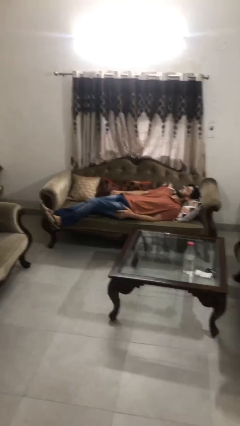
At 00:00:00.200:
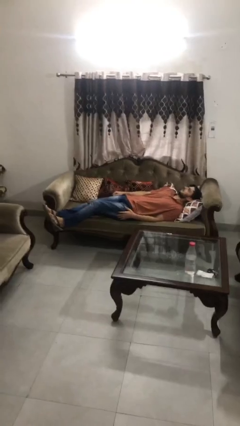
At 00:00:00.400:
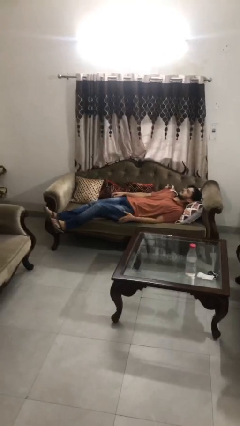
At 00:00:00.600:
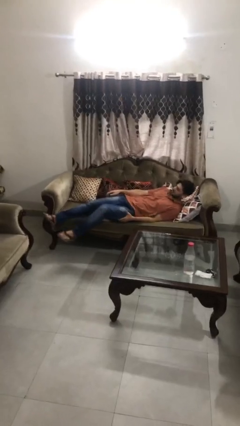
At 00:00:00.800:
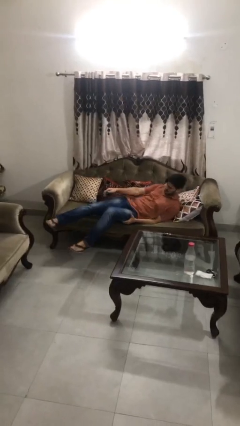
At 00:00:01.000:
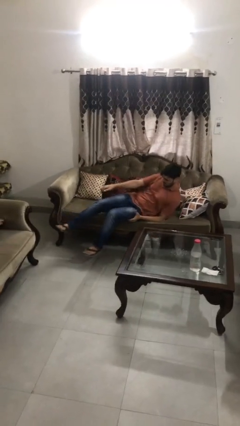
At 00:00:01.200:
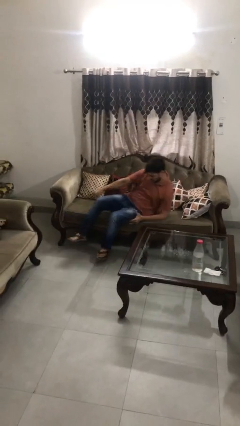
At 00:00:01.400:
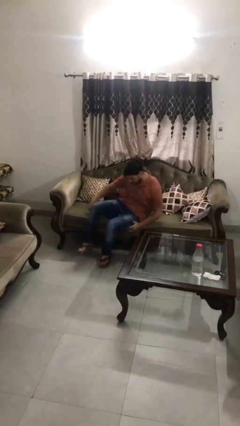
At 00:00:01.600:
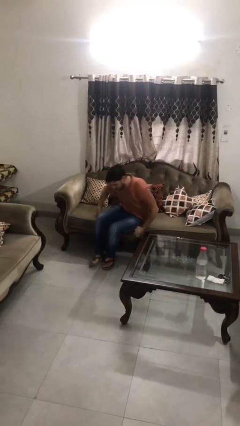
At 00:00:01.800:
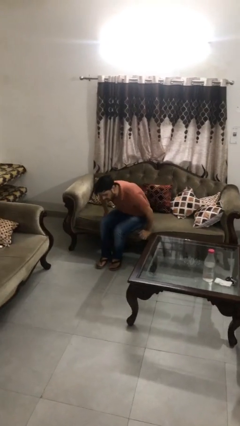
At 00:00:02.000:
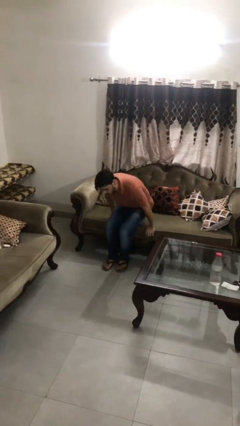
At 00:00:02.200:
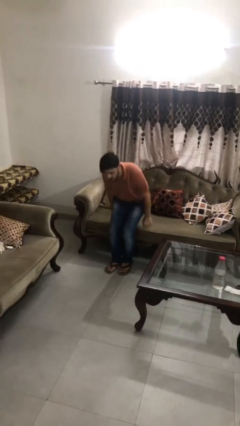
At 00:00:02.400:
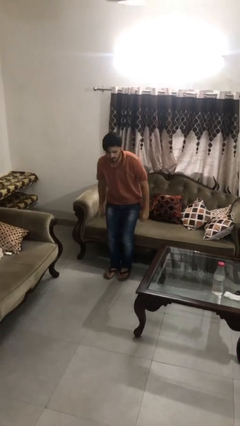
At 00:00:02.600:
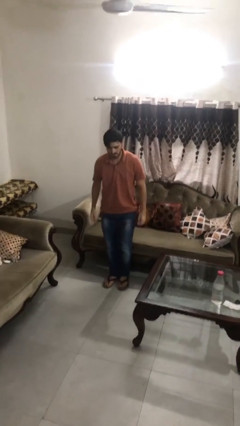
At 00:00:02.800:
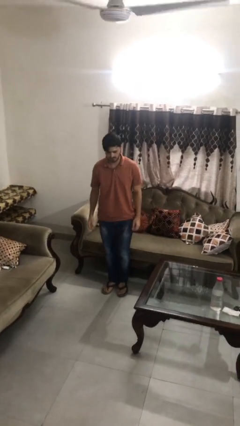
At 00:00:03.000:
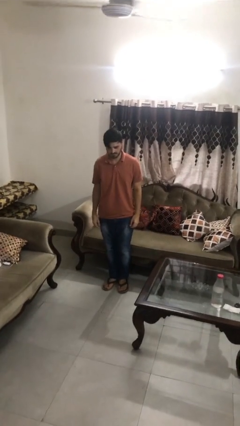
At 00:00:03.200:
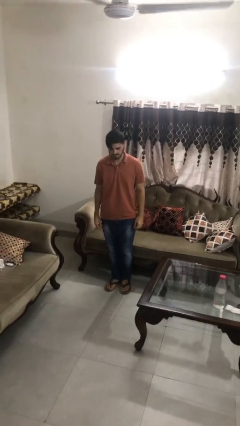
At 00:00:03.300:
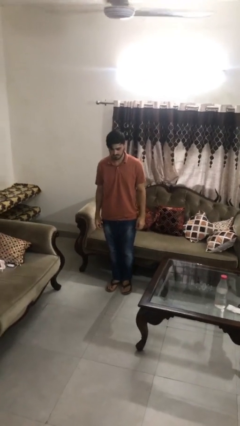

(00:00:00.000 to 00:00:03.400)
person stands up

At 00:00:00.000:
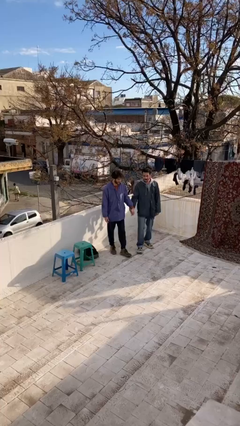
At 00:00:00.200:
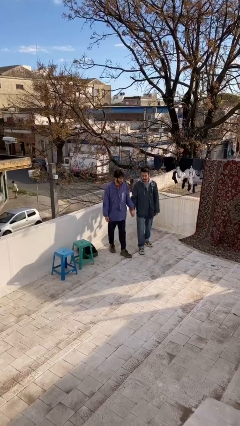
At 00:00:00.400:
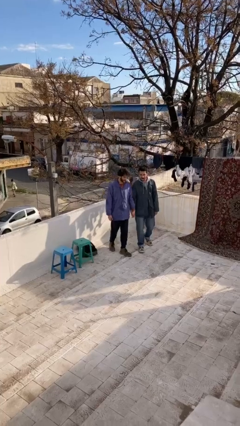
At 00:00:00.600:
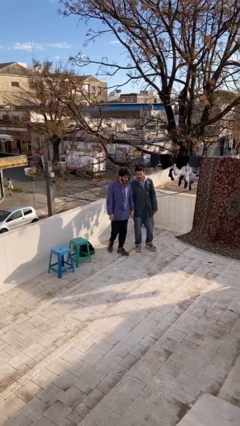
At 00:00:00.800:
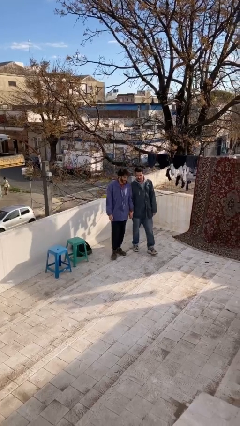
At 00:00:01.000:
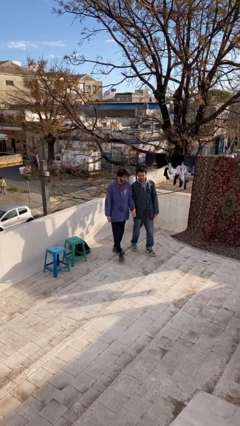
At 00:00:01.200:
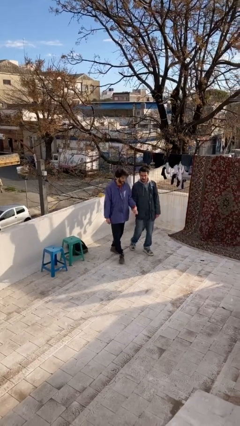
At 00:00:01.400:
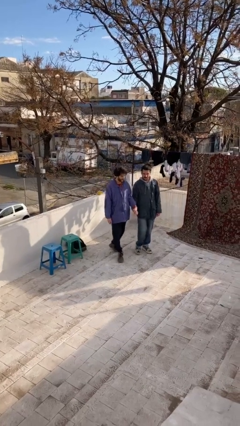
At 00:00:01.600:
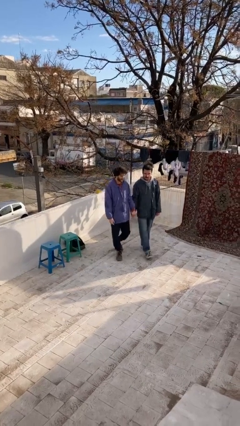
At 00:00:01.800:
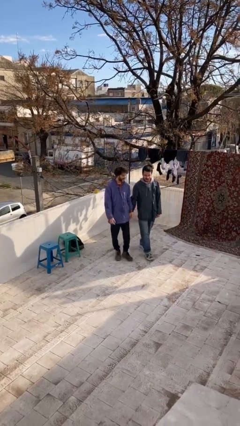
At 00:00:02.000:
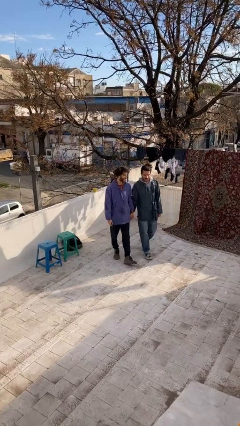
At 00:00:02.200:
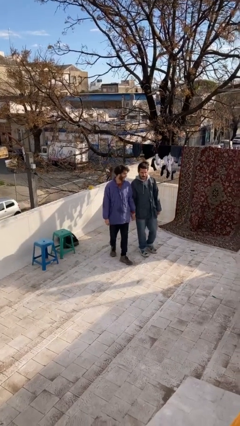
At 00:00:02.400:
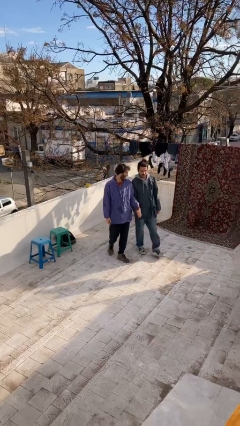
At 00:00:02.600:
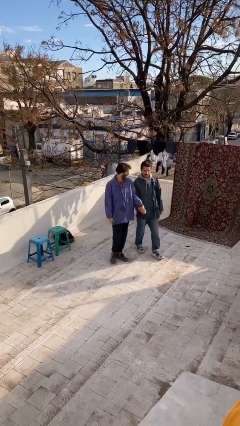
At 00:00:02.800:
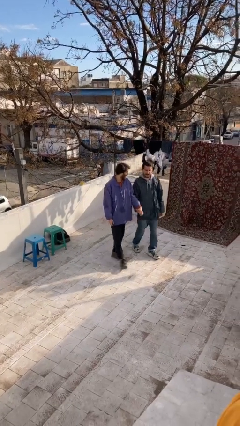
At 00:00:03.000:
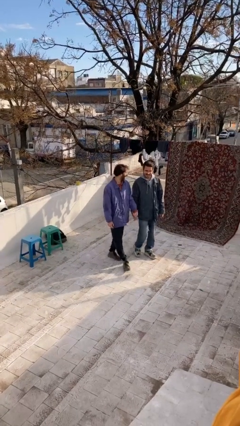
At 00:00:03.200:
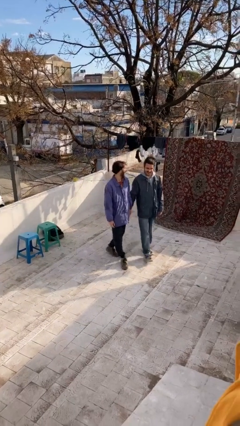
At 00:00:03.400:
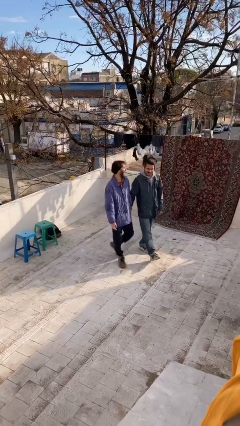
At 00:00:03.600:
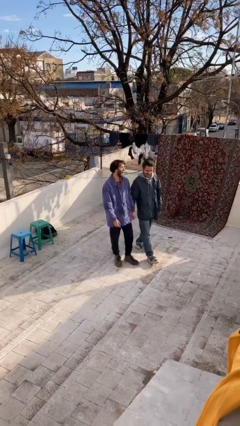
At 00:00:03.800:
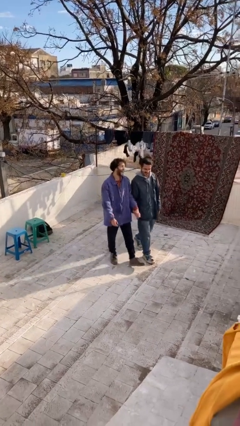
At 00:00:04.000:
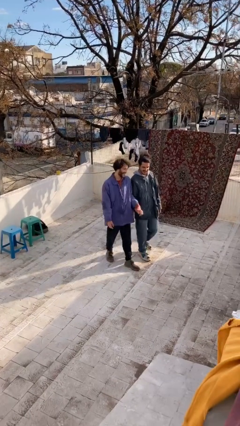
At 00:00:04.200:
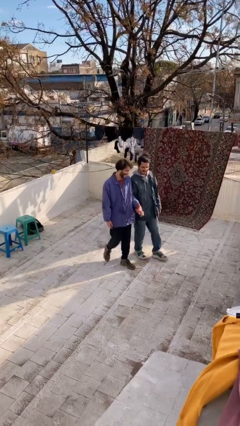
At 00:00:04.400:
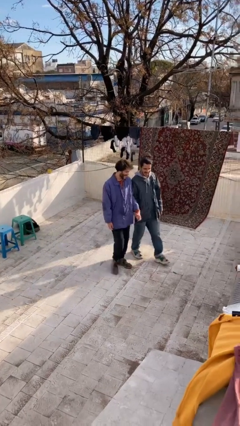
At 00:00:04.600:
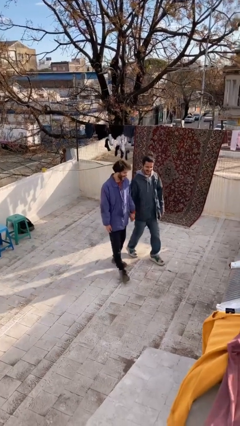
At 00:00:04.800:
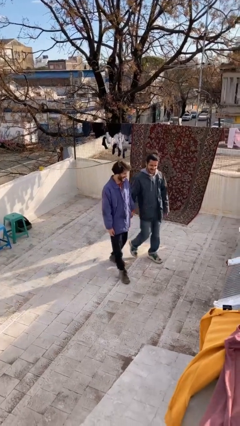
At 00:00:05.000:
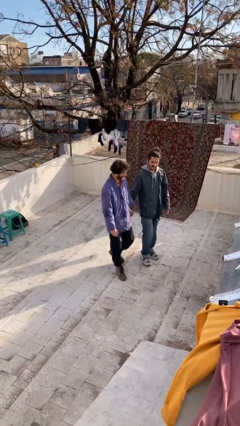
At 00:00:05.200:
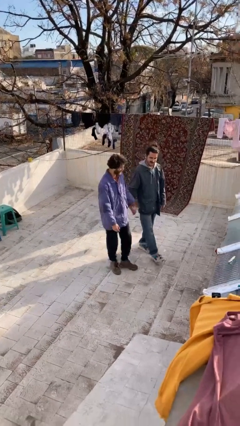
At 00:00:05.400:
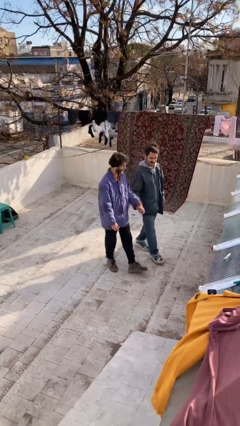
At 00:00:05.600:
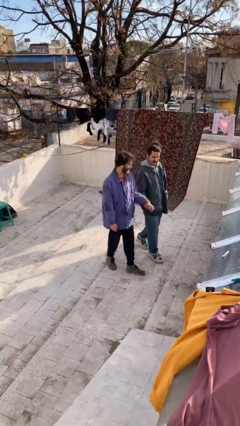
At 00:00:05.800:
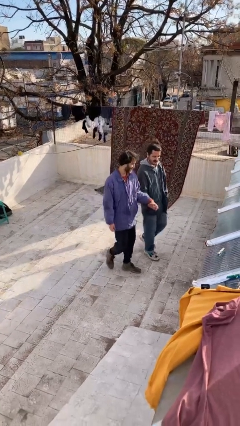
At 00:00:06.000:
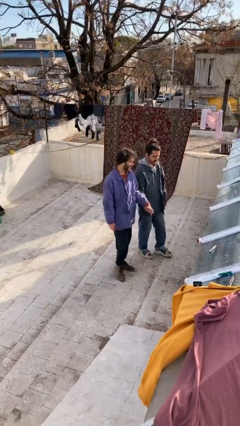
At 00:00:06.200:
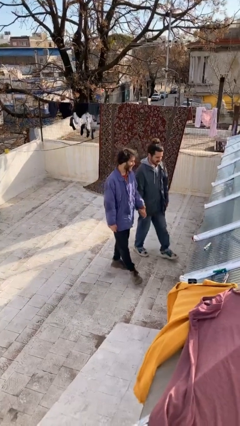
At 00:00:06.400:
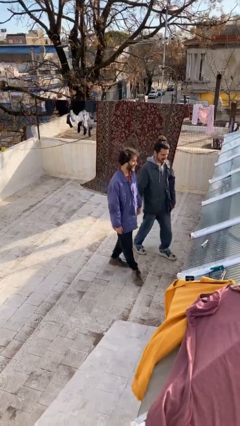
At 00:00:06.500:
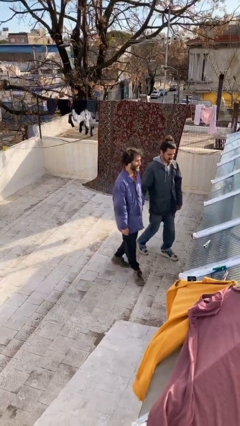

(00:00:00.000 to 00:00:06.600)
person holds hand

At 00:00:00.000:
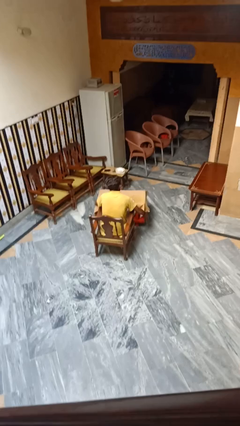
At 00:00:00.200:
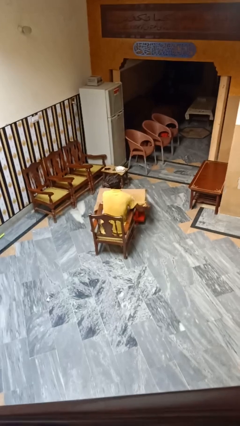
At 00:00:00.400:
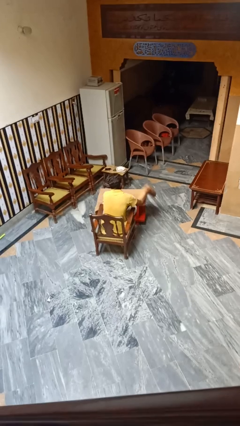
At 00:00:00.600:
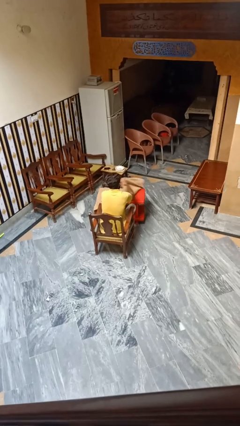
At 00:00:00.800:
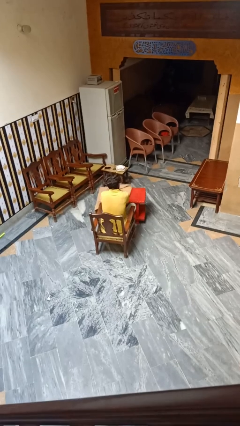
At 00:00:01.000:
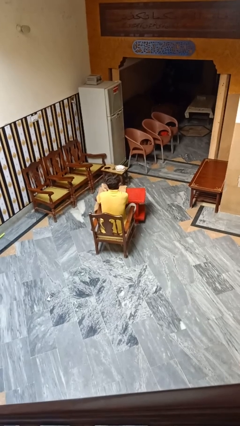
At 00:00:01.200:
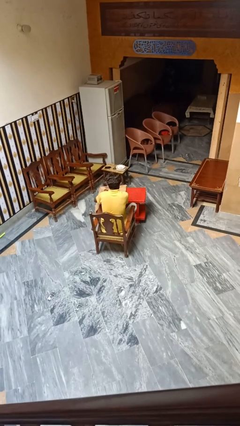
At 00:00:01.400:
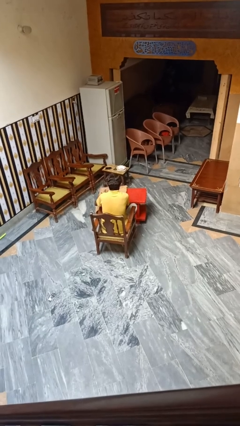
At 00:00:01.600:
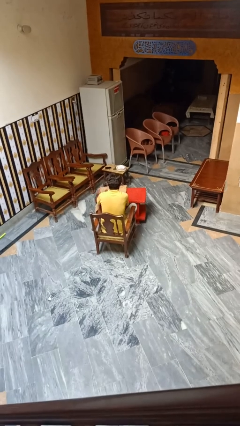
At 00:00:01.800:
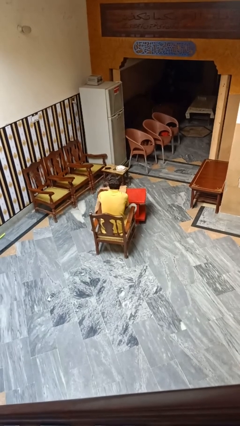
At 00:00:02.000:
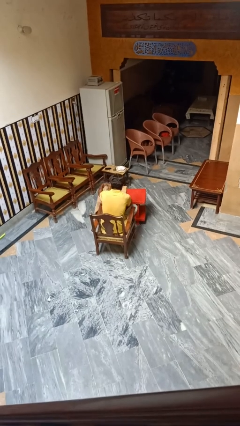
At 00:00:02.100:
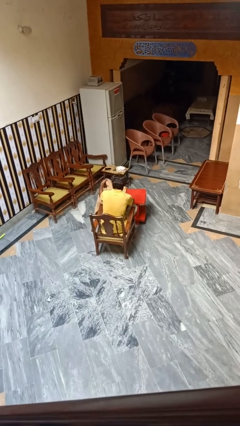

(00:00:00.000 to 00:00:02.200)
person spreads tablecloth

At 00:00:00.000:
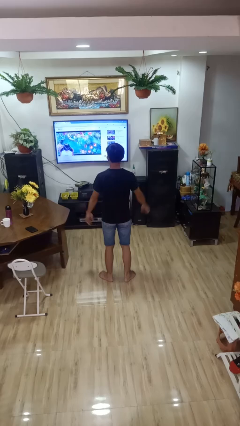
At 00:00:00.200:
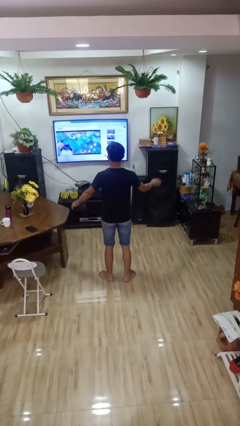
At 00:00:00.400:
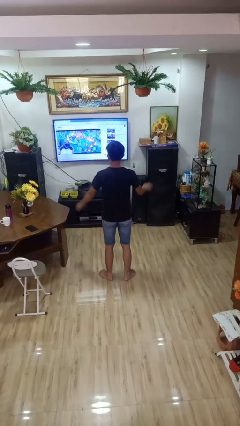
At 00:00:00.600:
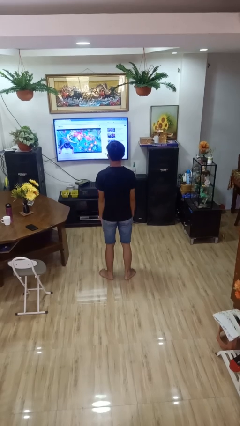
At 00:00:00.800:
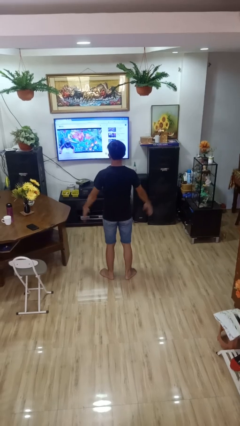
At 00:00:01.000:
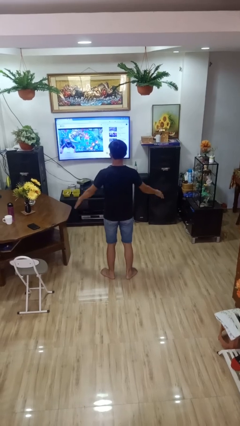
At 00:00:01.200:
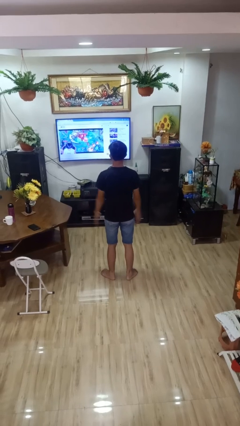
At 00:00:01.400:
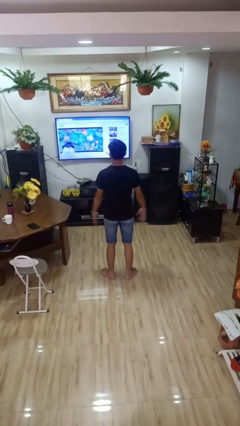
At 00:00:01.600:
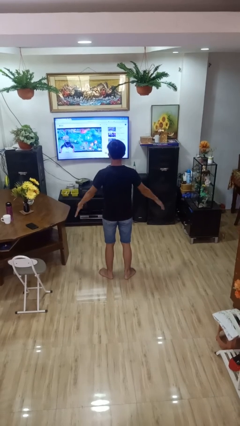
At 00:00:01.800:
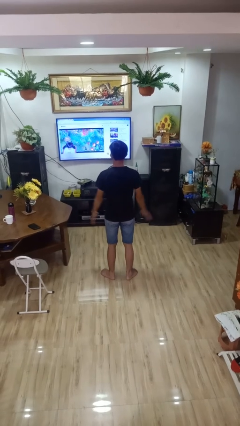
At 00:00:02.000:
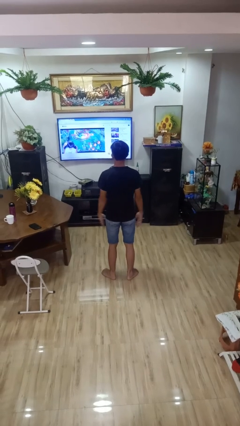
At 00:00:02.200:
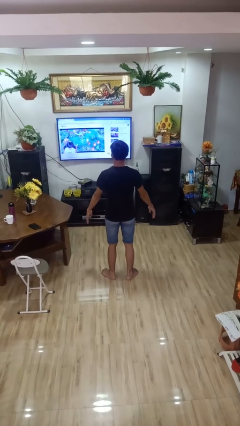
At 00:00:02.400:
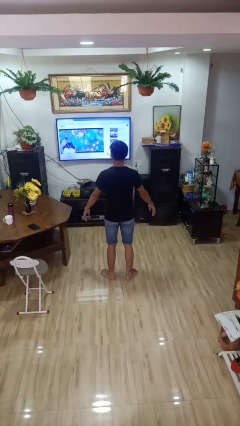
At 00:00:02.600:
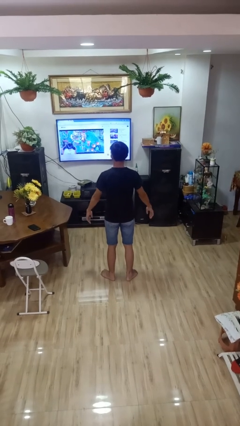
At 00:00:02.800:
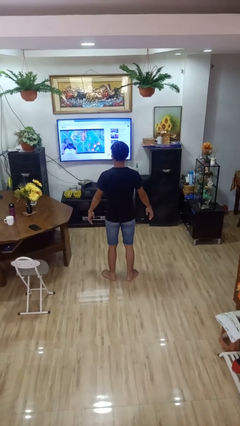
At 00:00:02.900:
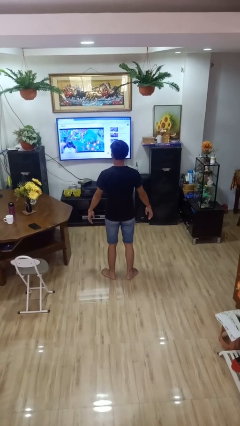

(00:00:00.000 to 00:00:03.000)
person slaps hands on thighs

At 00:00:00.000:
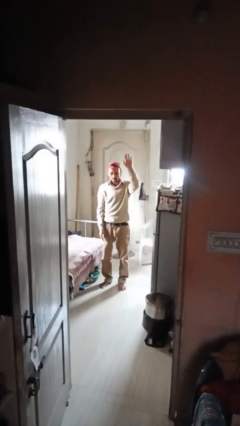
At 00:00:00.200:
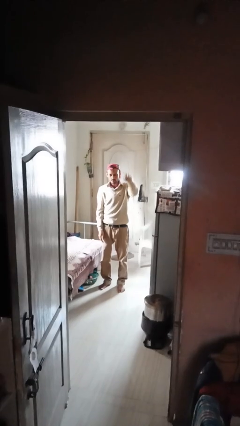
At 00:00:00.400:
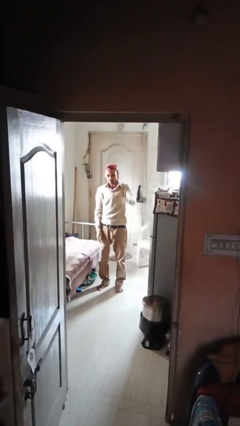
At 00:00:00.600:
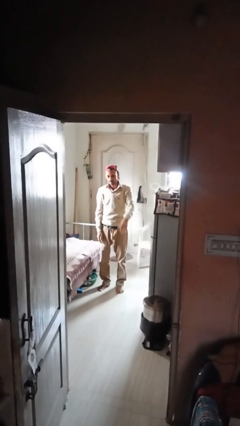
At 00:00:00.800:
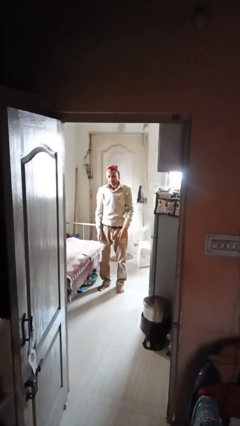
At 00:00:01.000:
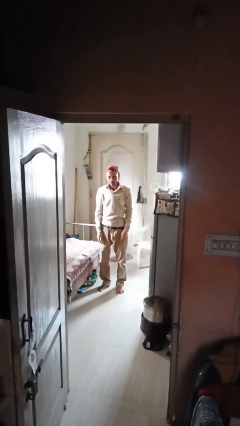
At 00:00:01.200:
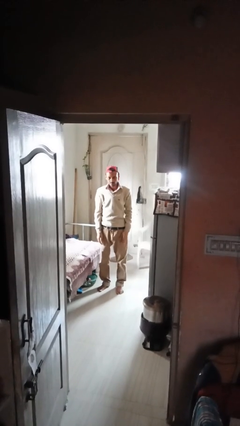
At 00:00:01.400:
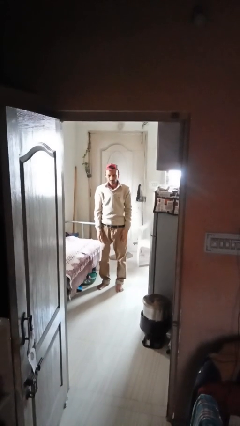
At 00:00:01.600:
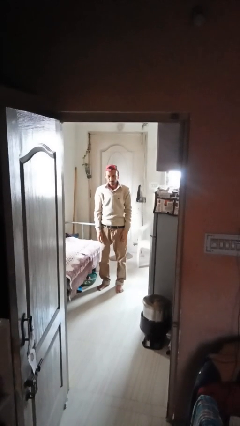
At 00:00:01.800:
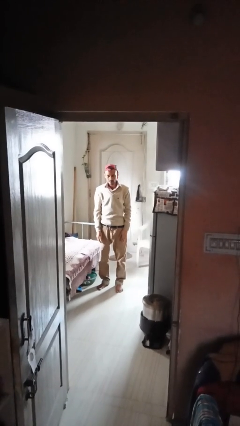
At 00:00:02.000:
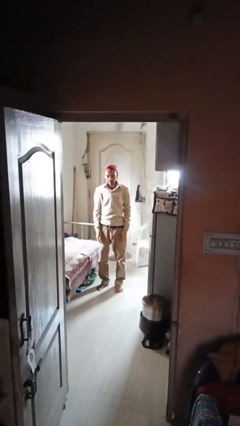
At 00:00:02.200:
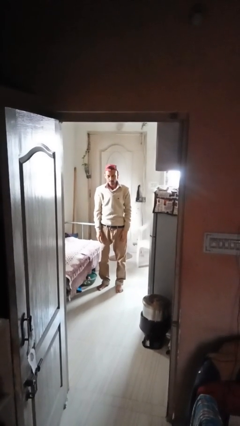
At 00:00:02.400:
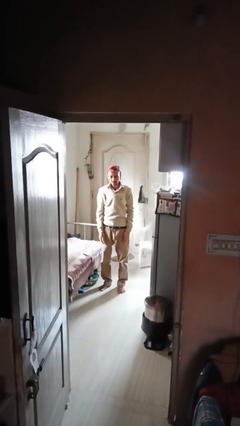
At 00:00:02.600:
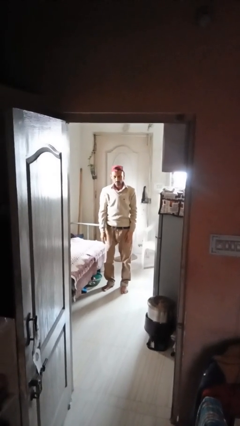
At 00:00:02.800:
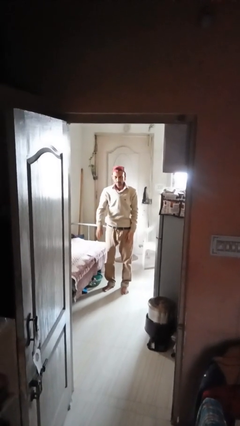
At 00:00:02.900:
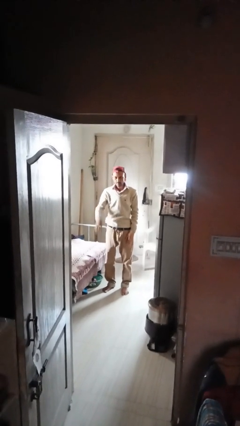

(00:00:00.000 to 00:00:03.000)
person gestures lower hand
